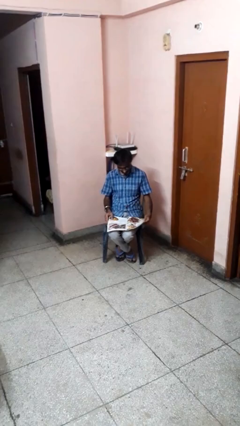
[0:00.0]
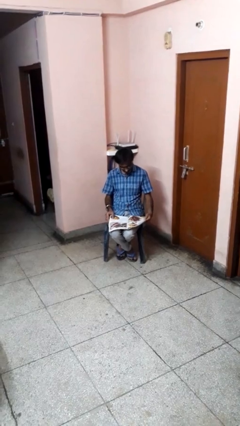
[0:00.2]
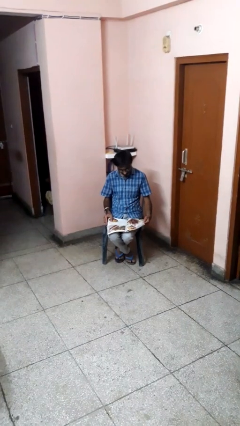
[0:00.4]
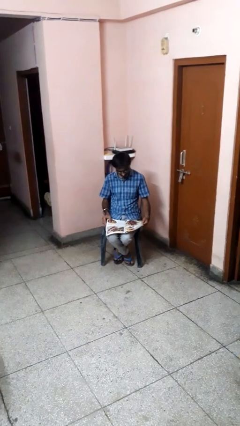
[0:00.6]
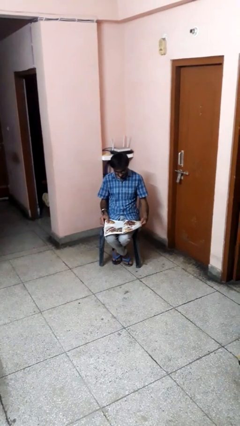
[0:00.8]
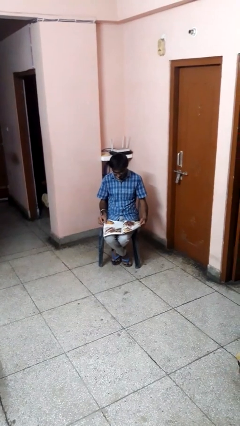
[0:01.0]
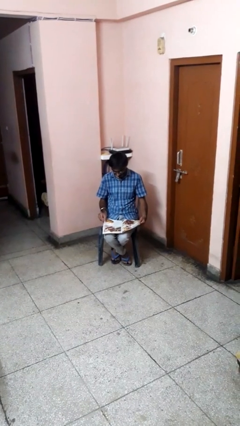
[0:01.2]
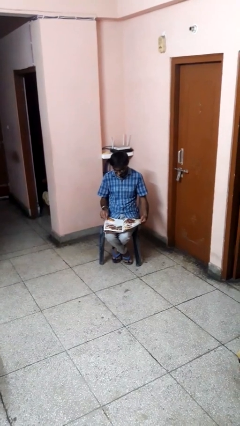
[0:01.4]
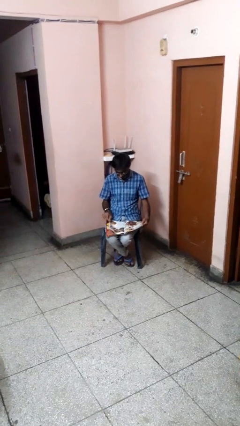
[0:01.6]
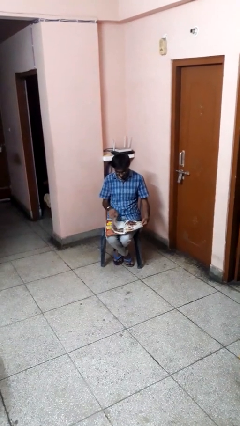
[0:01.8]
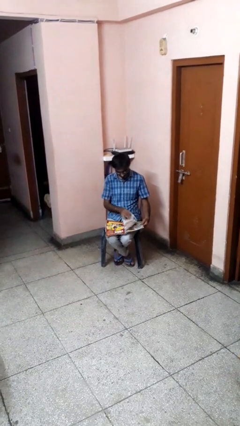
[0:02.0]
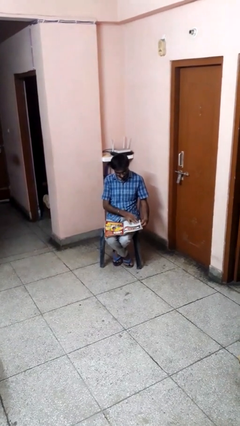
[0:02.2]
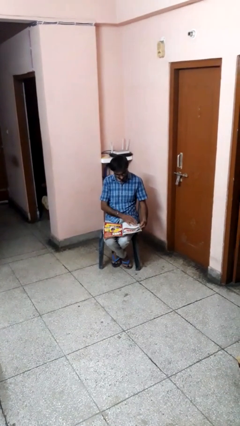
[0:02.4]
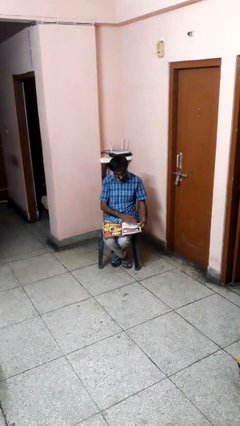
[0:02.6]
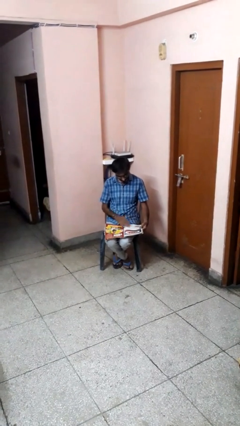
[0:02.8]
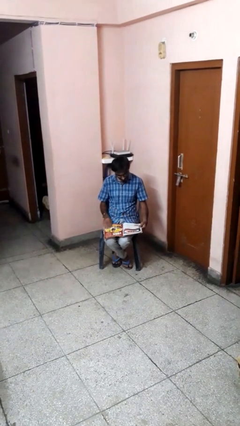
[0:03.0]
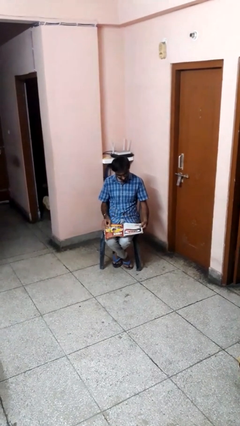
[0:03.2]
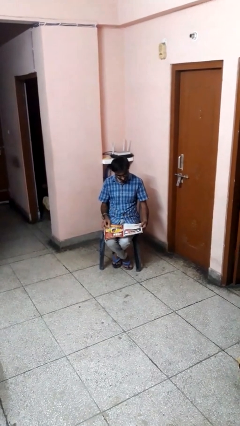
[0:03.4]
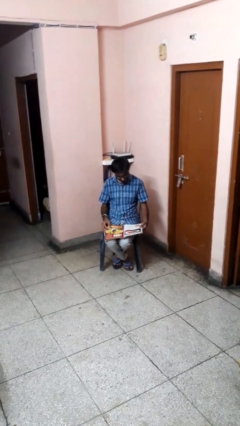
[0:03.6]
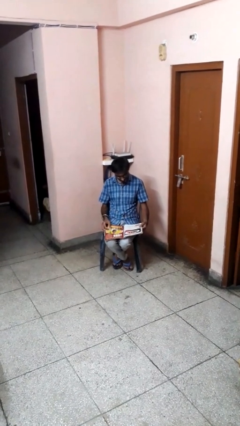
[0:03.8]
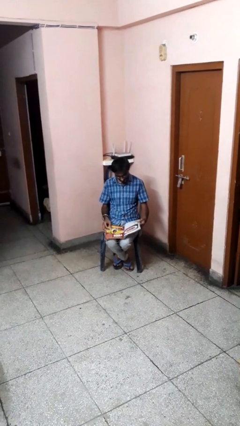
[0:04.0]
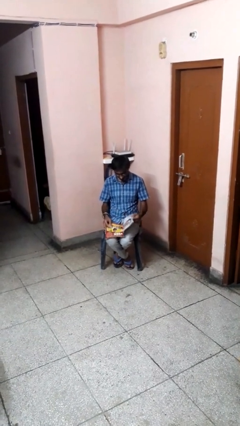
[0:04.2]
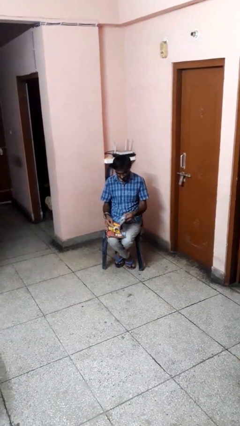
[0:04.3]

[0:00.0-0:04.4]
person reads magazine

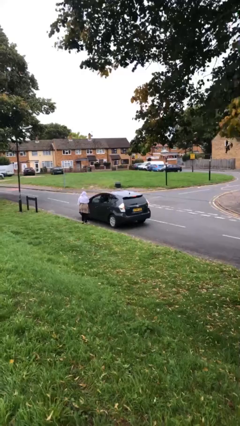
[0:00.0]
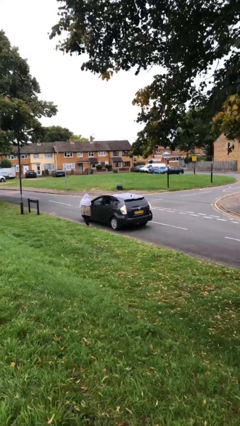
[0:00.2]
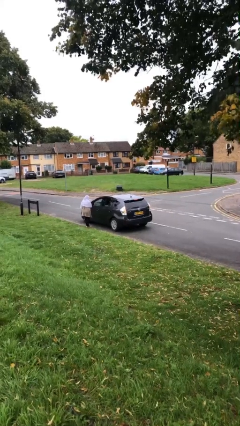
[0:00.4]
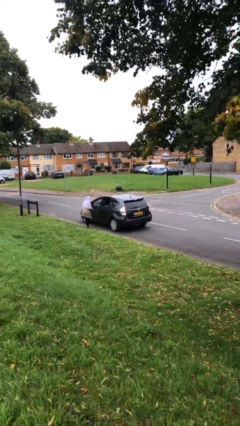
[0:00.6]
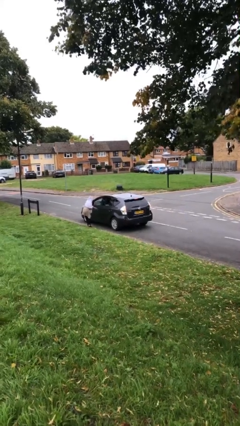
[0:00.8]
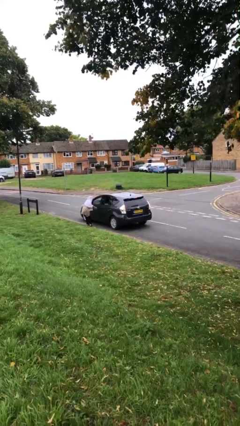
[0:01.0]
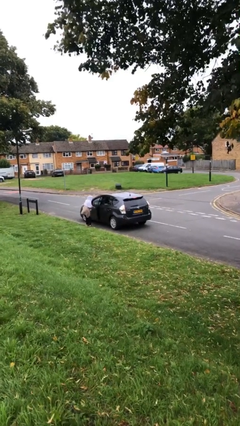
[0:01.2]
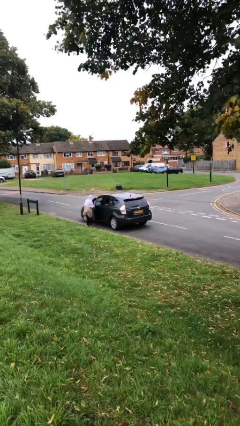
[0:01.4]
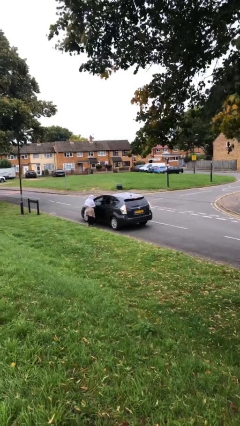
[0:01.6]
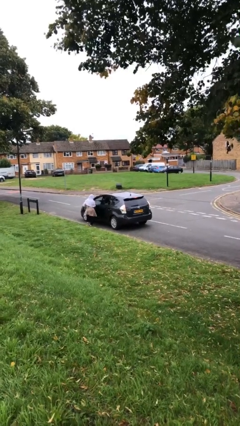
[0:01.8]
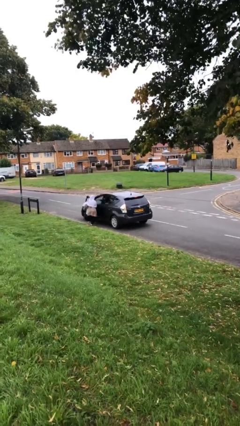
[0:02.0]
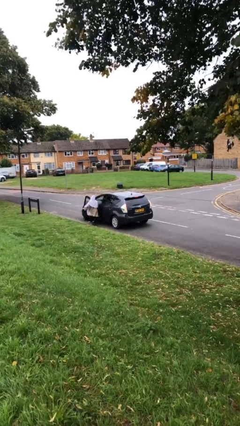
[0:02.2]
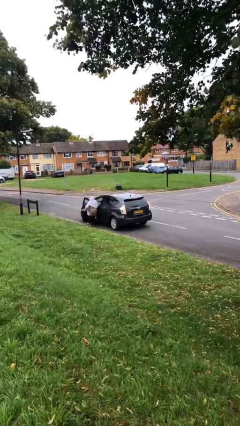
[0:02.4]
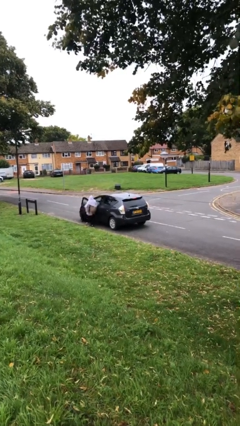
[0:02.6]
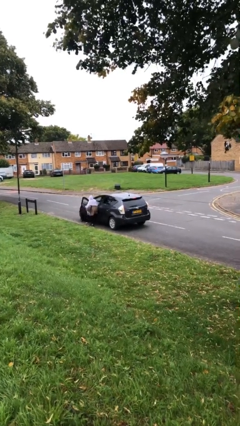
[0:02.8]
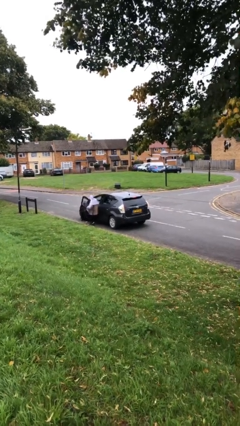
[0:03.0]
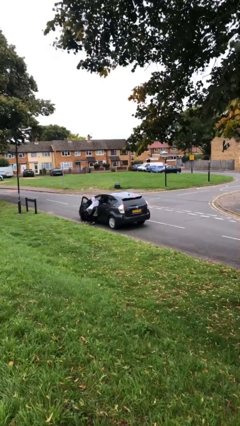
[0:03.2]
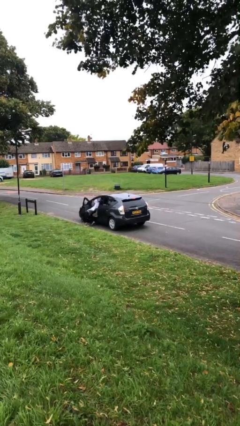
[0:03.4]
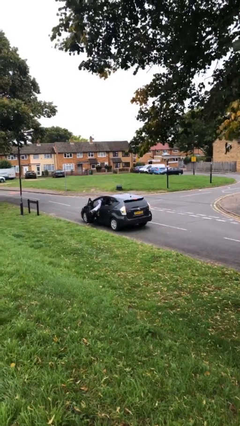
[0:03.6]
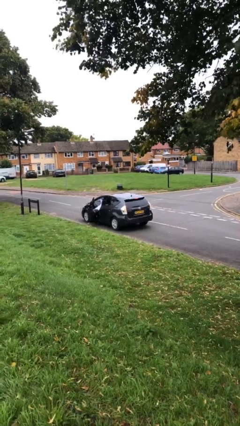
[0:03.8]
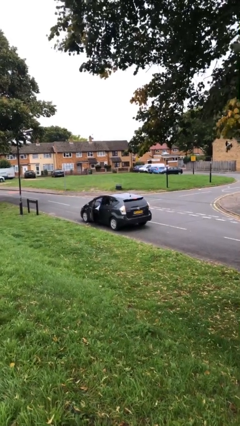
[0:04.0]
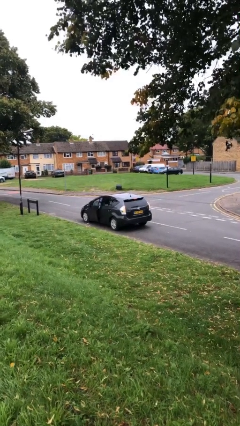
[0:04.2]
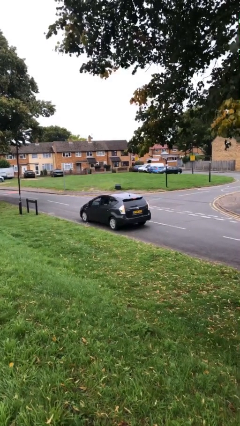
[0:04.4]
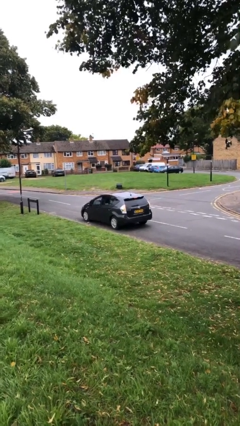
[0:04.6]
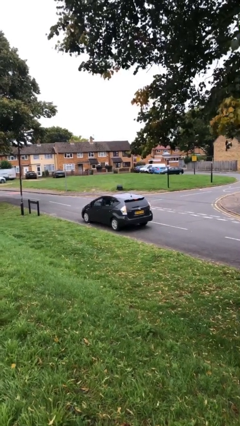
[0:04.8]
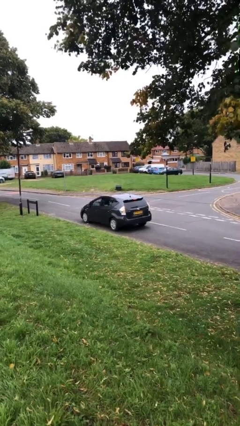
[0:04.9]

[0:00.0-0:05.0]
car picks up person

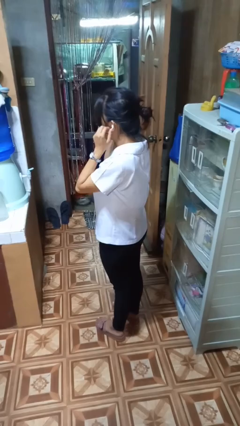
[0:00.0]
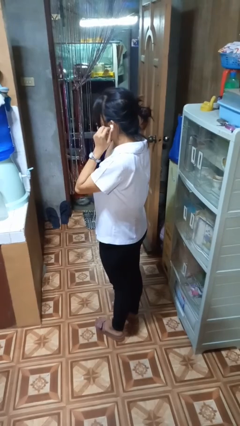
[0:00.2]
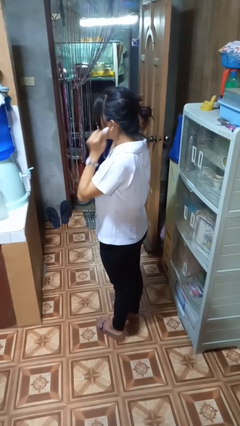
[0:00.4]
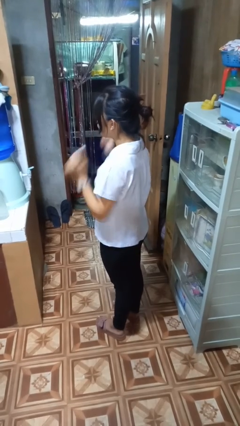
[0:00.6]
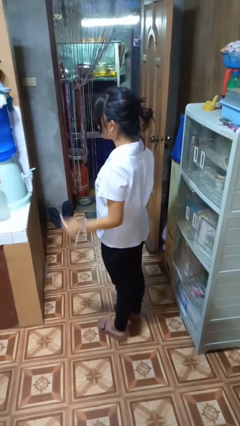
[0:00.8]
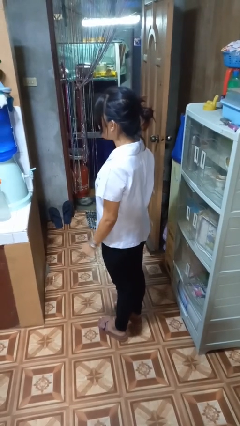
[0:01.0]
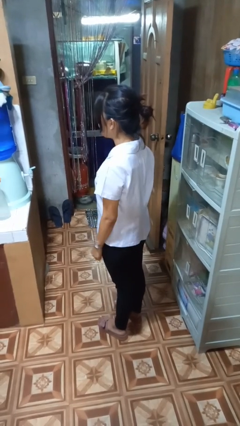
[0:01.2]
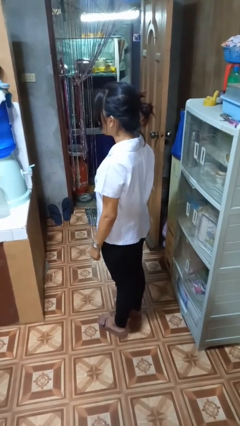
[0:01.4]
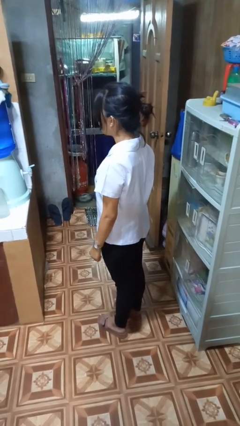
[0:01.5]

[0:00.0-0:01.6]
person takes off headphones

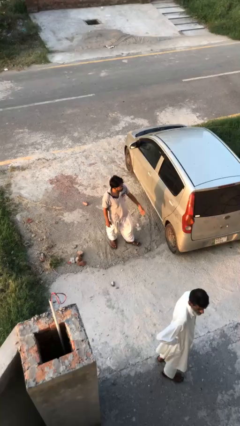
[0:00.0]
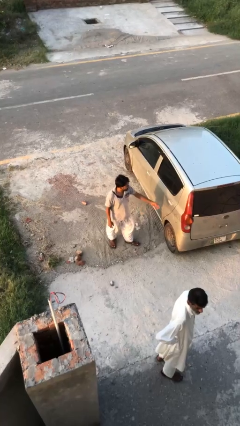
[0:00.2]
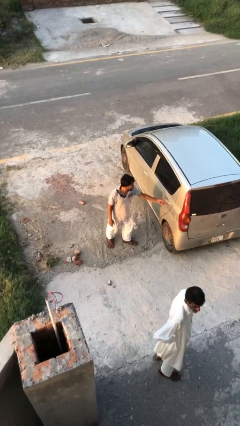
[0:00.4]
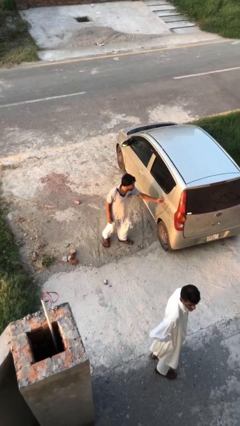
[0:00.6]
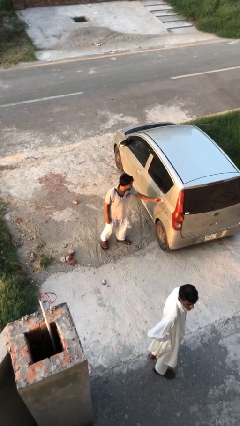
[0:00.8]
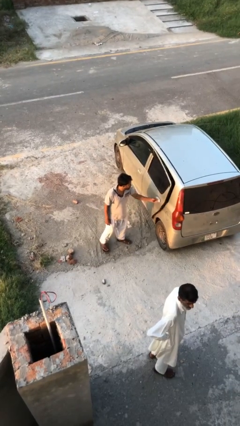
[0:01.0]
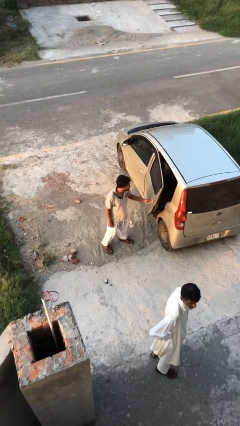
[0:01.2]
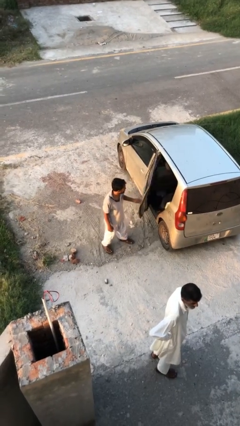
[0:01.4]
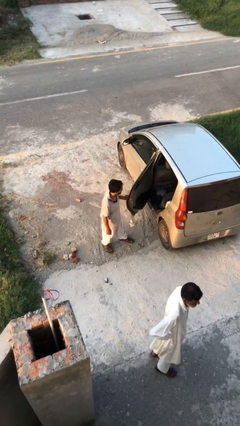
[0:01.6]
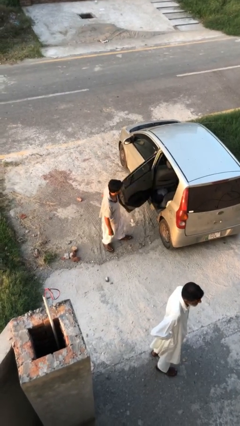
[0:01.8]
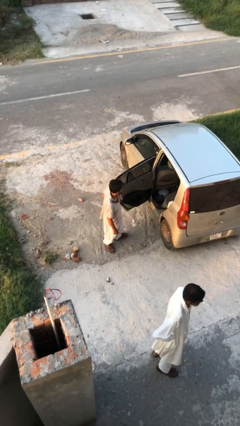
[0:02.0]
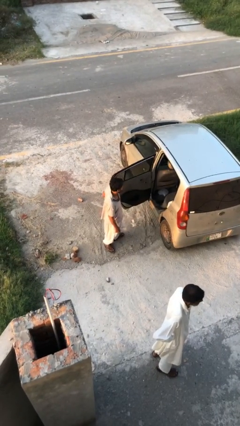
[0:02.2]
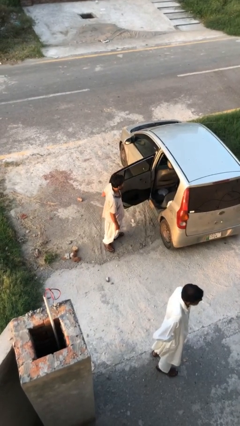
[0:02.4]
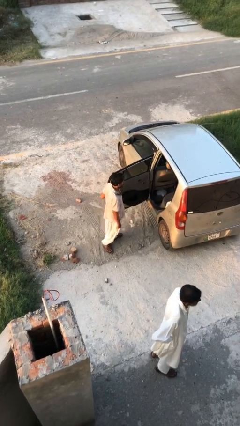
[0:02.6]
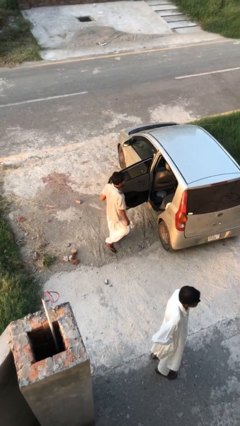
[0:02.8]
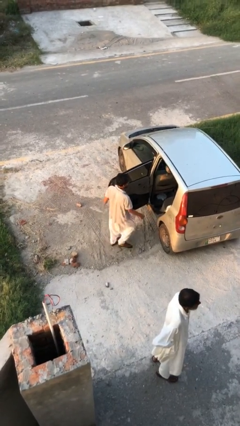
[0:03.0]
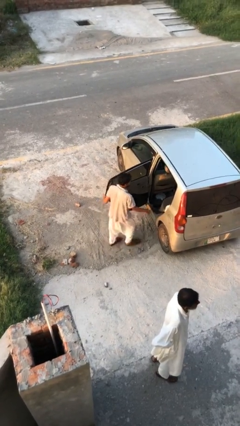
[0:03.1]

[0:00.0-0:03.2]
person opens car door

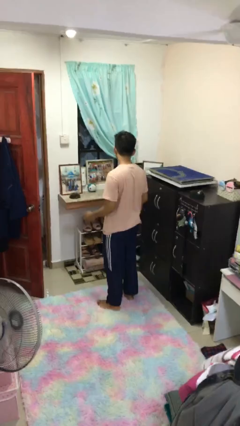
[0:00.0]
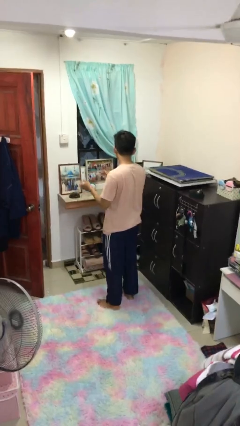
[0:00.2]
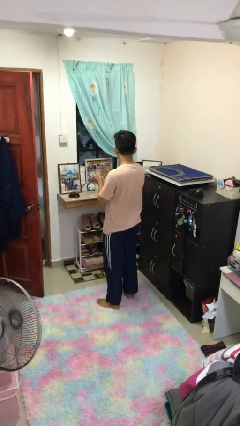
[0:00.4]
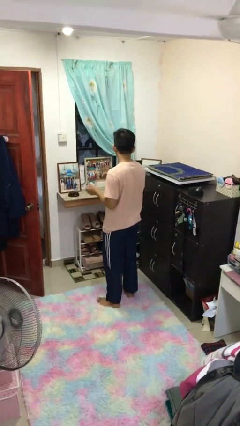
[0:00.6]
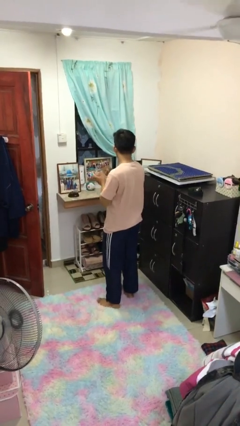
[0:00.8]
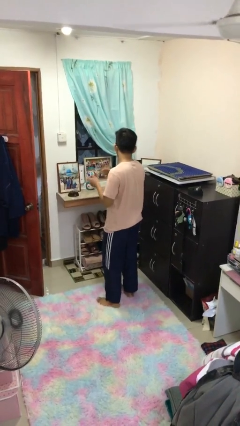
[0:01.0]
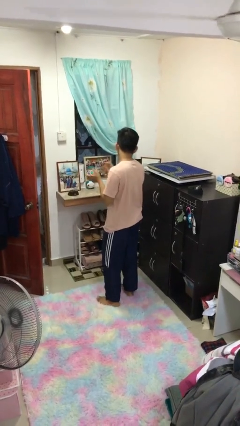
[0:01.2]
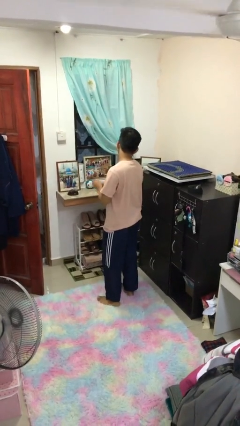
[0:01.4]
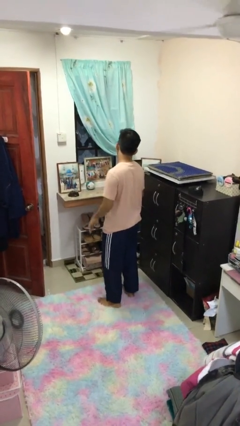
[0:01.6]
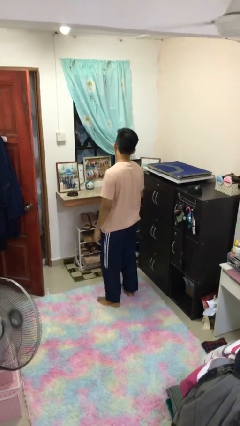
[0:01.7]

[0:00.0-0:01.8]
person claps hands

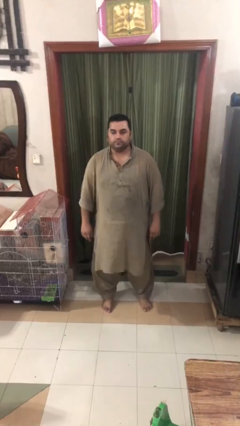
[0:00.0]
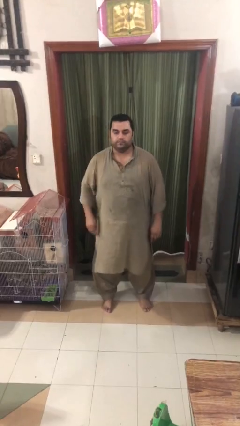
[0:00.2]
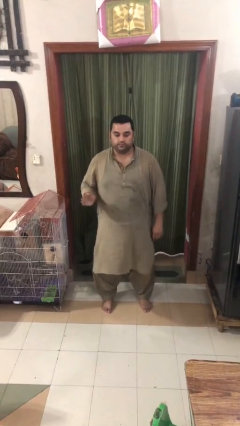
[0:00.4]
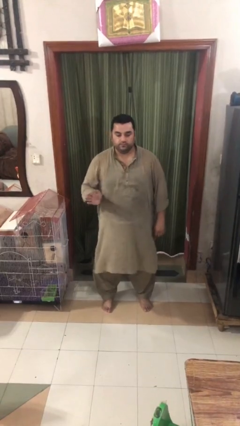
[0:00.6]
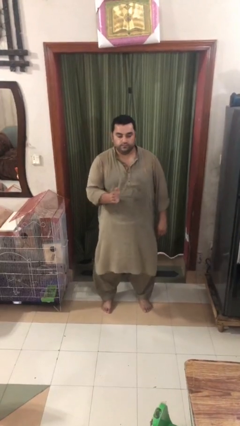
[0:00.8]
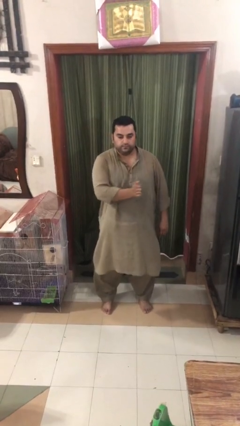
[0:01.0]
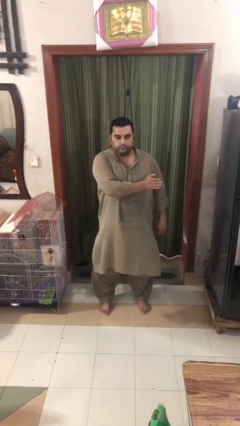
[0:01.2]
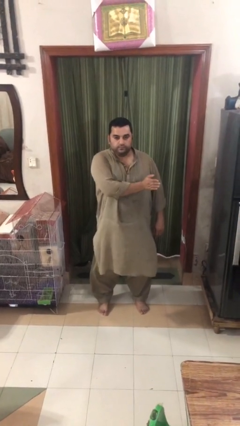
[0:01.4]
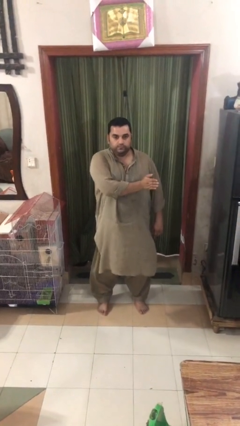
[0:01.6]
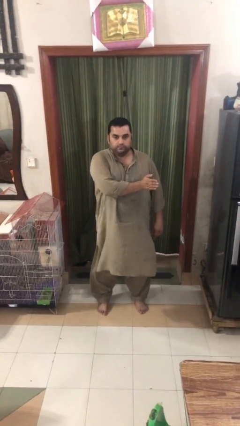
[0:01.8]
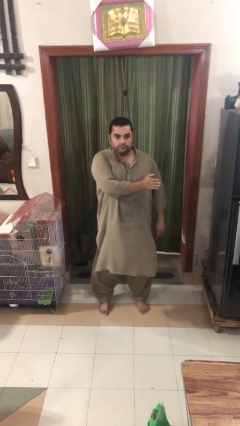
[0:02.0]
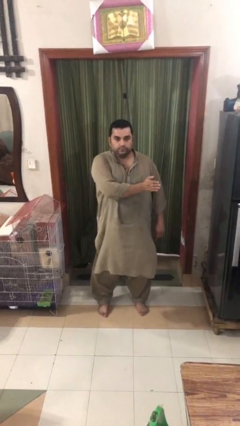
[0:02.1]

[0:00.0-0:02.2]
person gestures swipe left
